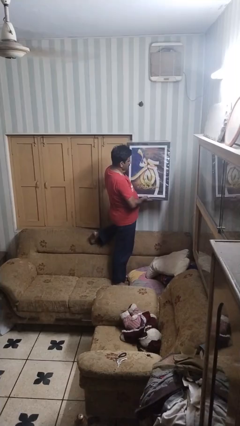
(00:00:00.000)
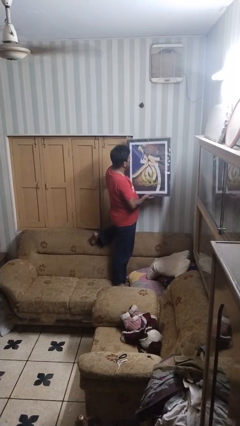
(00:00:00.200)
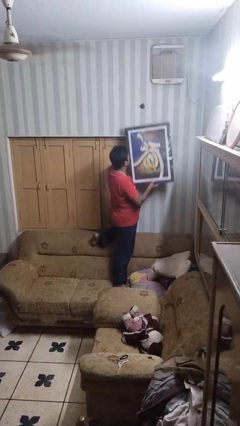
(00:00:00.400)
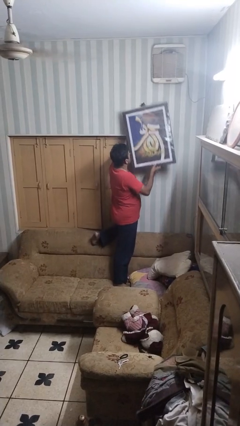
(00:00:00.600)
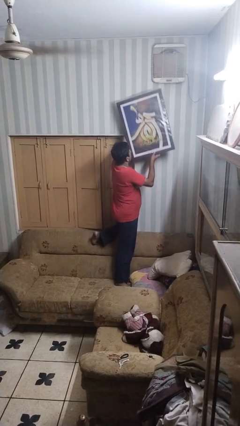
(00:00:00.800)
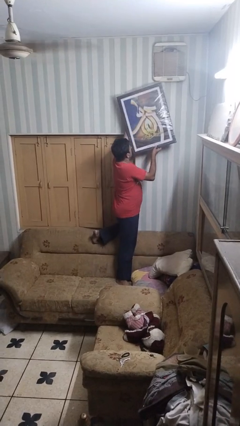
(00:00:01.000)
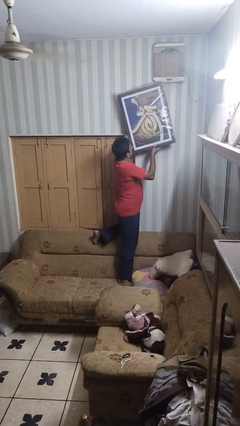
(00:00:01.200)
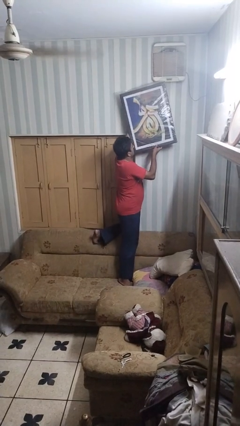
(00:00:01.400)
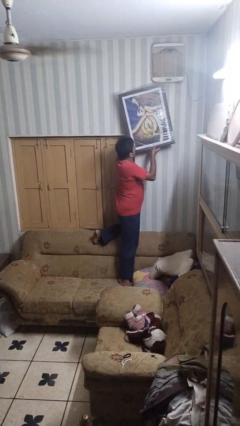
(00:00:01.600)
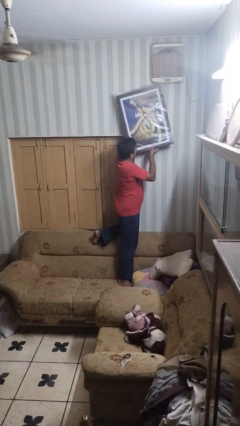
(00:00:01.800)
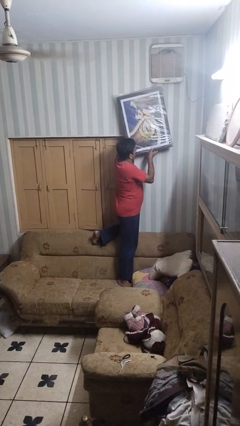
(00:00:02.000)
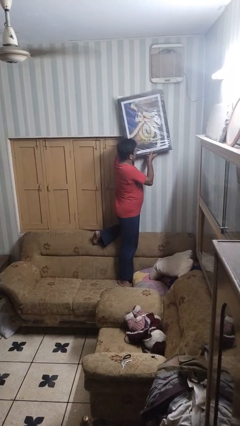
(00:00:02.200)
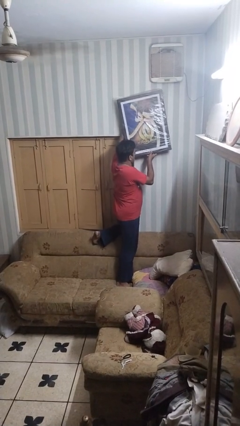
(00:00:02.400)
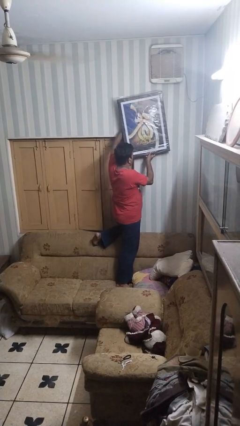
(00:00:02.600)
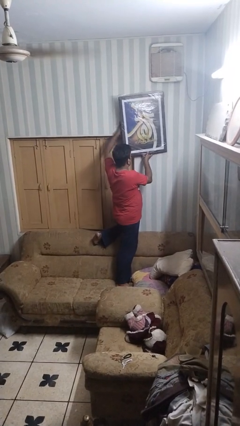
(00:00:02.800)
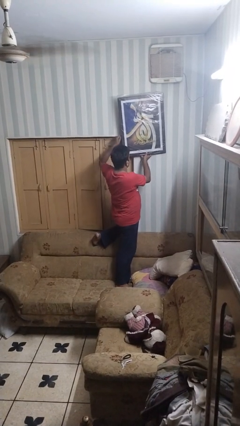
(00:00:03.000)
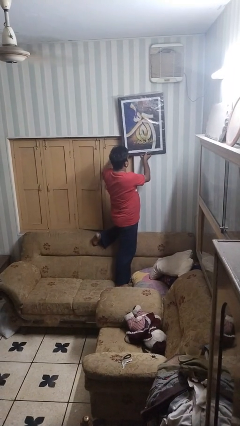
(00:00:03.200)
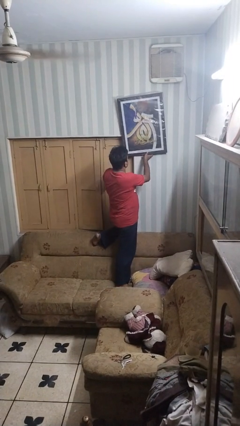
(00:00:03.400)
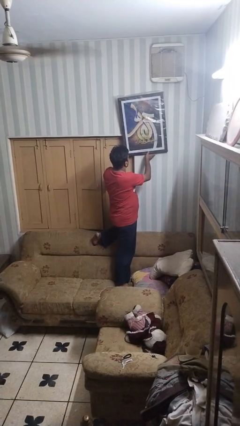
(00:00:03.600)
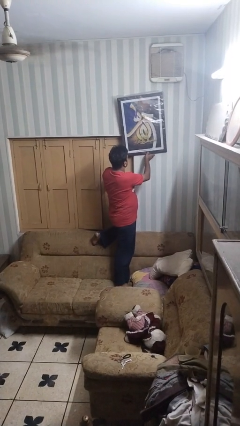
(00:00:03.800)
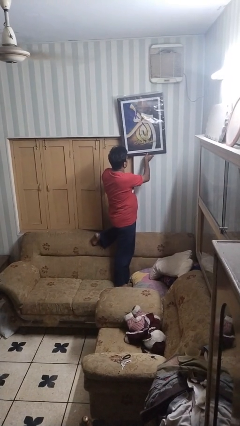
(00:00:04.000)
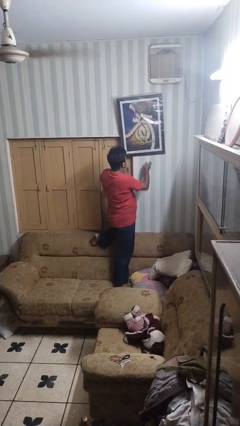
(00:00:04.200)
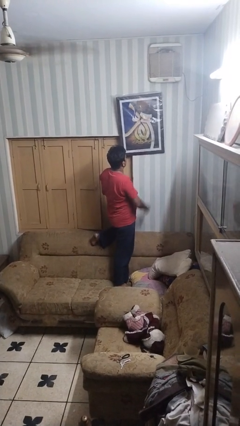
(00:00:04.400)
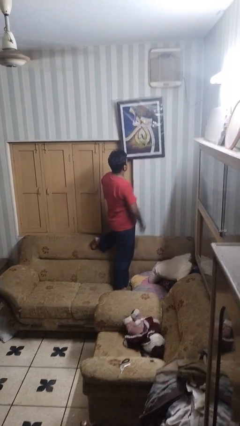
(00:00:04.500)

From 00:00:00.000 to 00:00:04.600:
person puts up picture frame

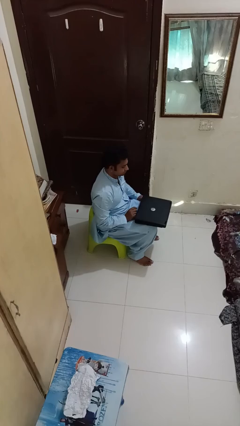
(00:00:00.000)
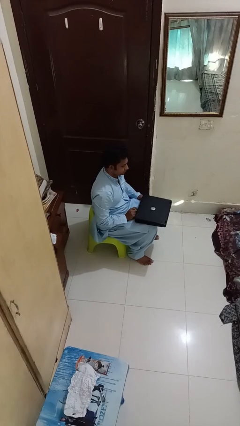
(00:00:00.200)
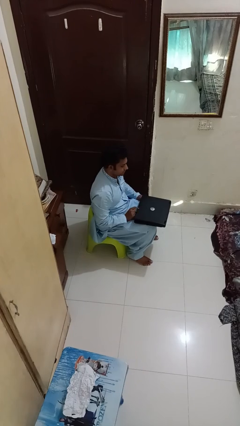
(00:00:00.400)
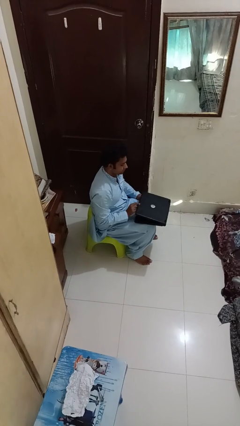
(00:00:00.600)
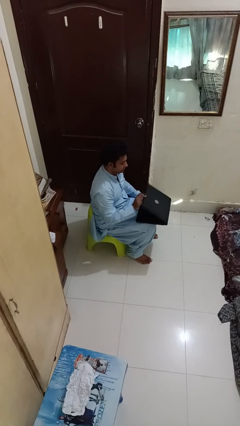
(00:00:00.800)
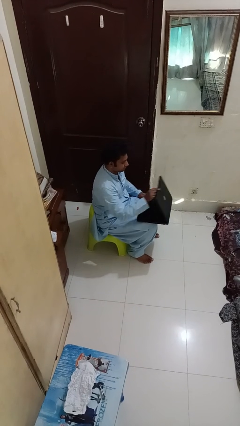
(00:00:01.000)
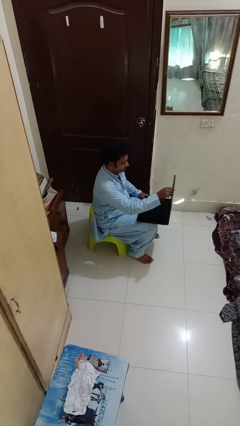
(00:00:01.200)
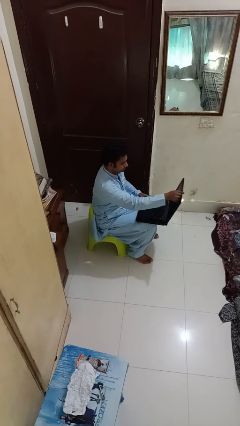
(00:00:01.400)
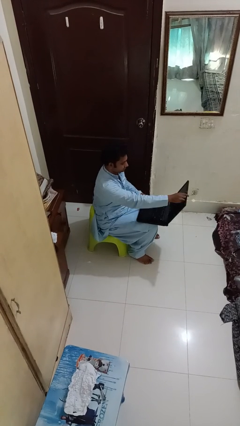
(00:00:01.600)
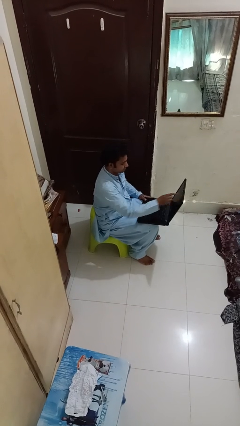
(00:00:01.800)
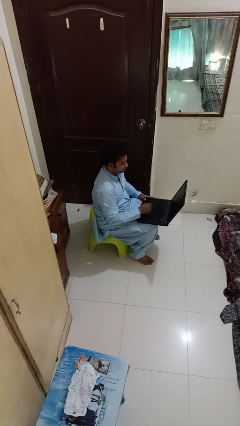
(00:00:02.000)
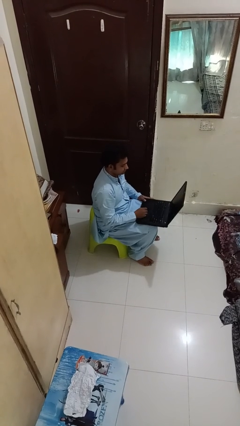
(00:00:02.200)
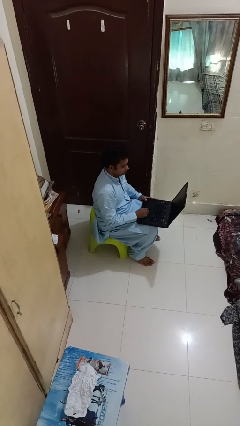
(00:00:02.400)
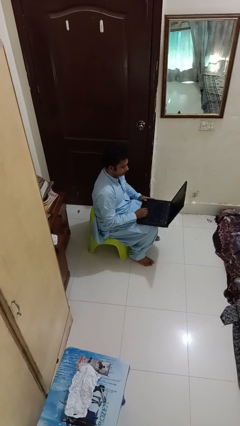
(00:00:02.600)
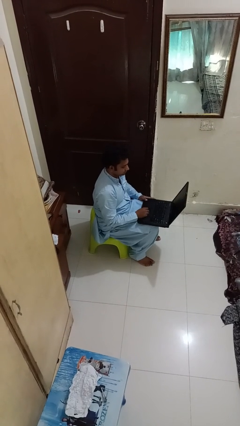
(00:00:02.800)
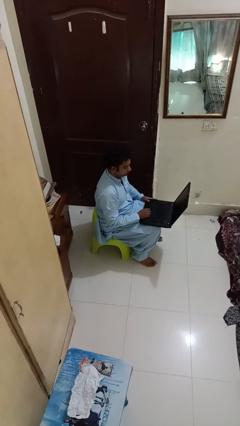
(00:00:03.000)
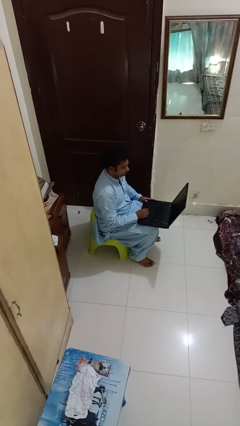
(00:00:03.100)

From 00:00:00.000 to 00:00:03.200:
person opens laptop

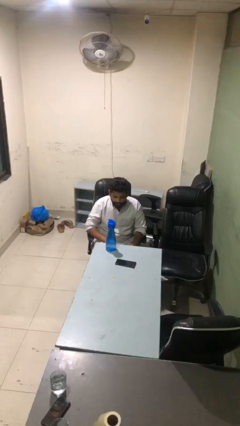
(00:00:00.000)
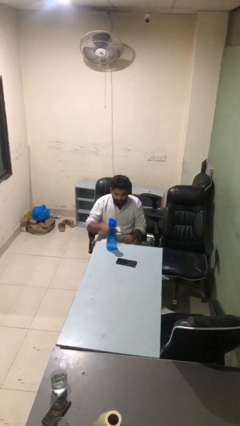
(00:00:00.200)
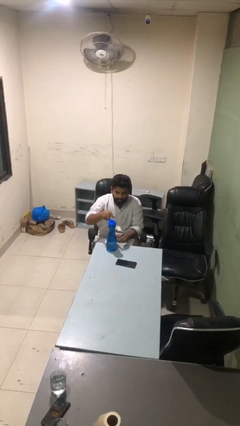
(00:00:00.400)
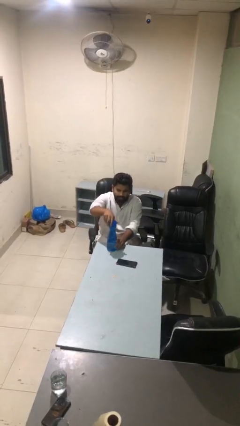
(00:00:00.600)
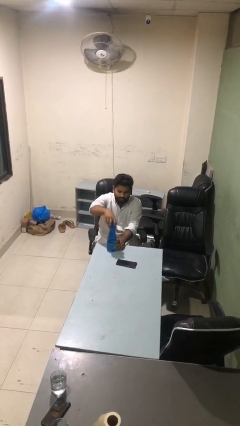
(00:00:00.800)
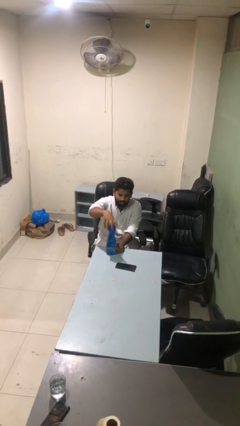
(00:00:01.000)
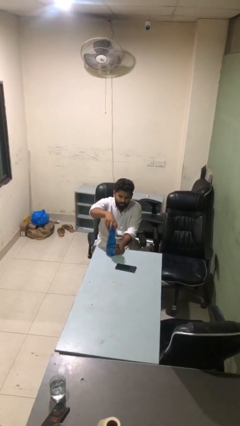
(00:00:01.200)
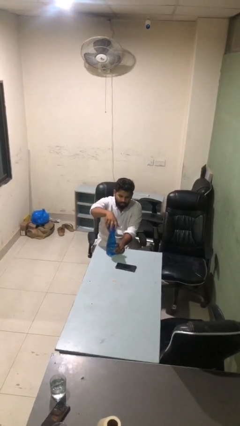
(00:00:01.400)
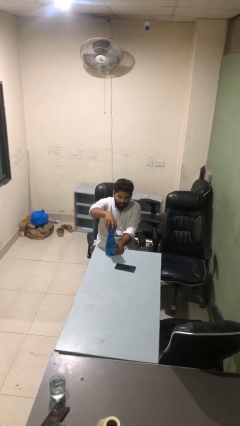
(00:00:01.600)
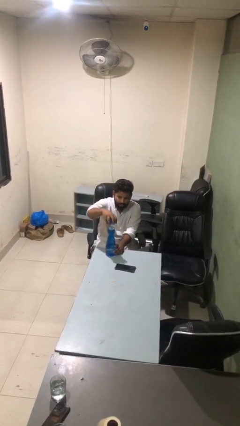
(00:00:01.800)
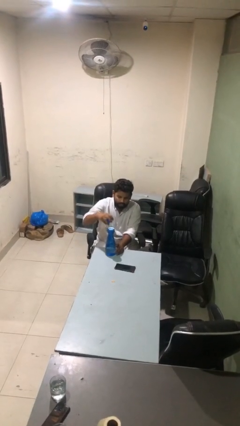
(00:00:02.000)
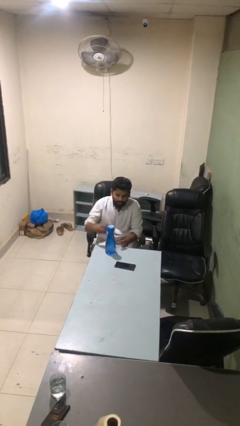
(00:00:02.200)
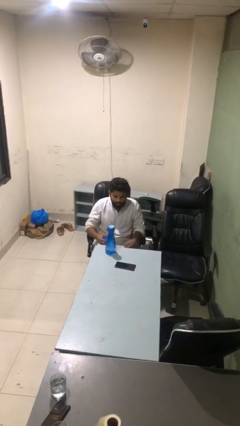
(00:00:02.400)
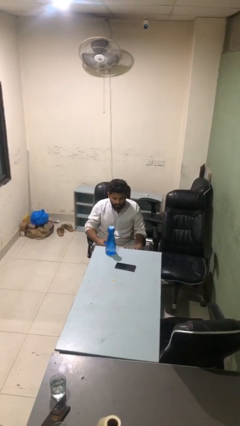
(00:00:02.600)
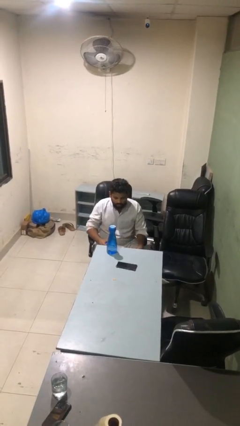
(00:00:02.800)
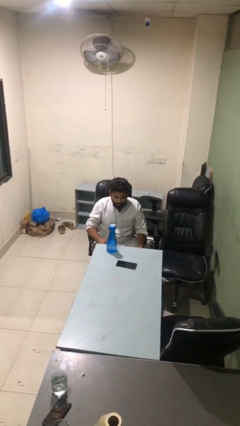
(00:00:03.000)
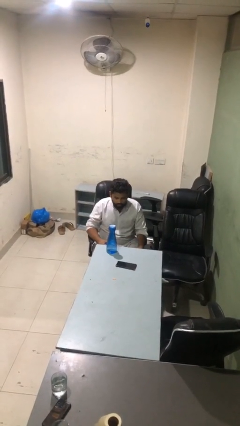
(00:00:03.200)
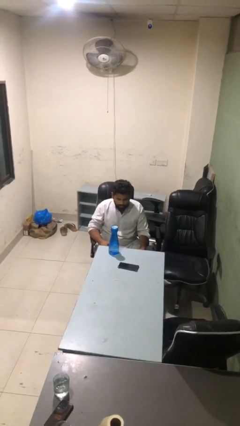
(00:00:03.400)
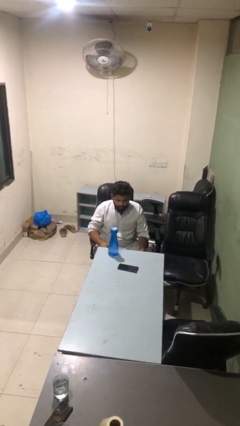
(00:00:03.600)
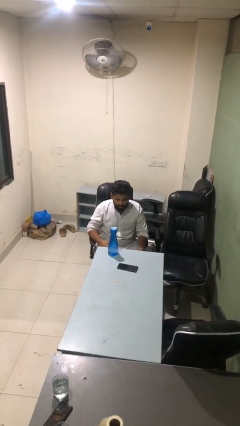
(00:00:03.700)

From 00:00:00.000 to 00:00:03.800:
person unscrews lid from bottle

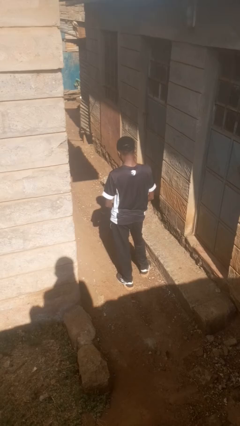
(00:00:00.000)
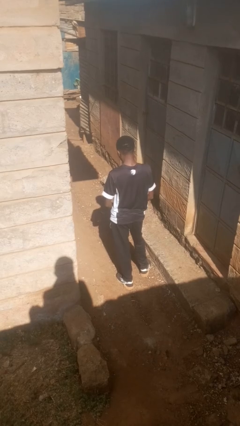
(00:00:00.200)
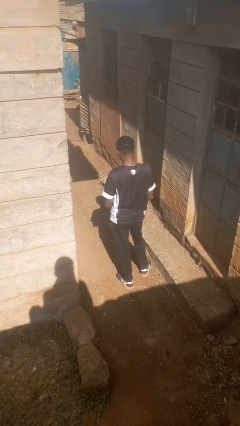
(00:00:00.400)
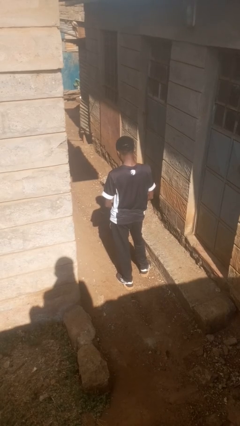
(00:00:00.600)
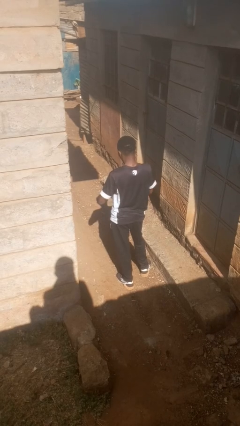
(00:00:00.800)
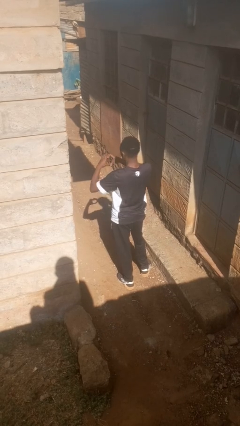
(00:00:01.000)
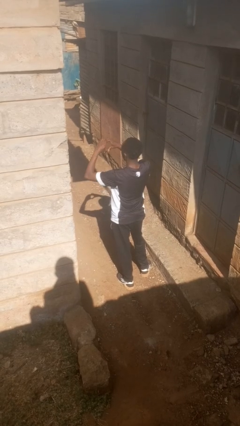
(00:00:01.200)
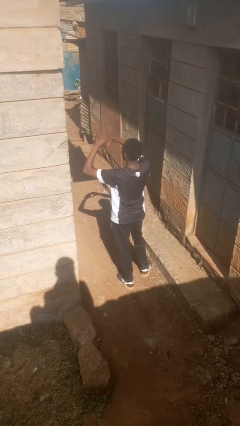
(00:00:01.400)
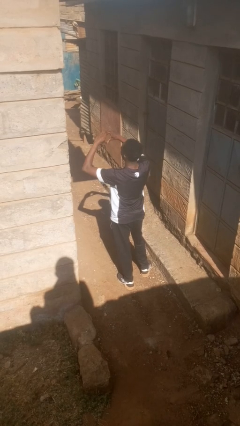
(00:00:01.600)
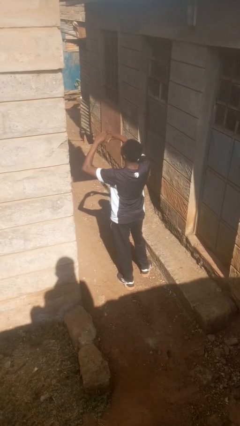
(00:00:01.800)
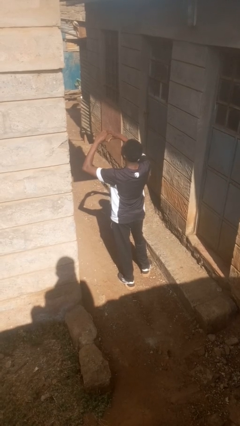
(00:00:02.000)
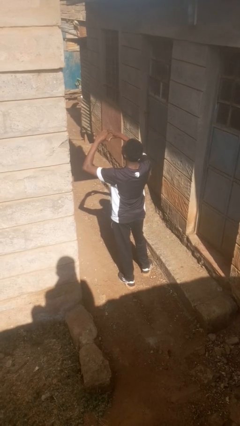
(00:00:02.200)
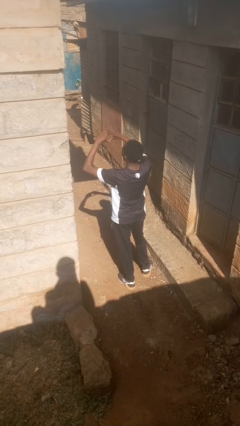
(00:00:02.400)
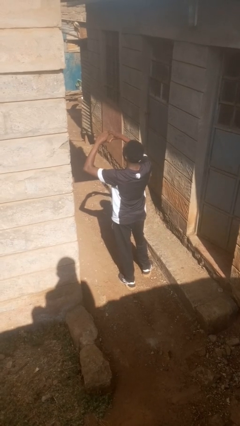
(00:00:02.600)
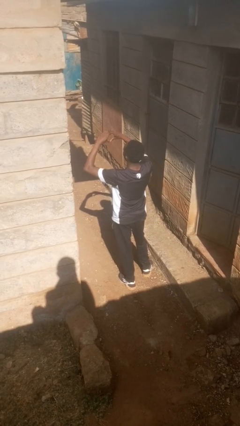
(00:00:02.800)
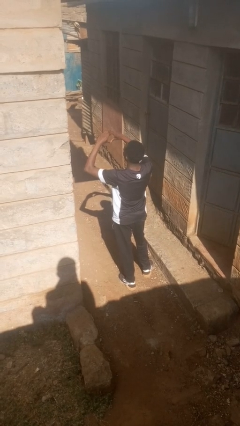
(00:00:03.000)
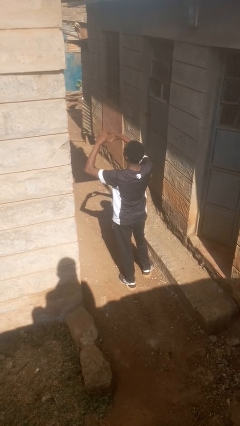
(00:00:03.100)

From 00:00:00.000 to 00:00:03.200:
person gestures heart

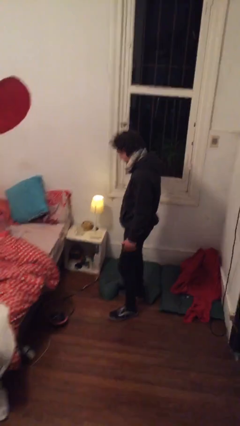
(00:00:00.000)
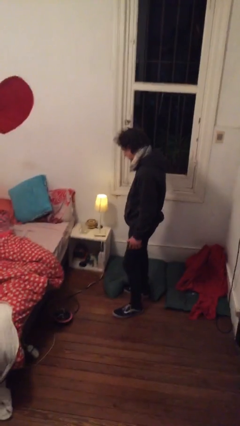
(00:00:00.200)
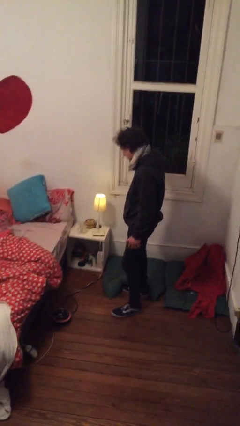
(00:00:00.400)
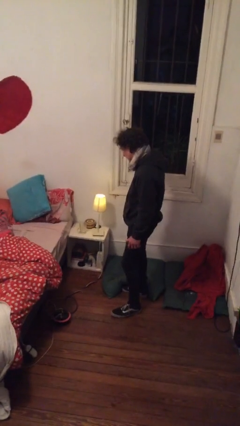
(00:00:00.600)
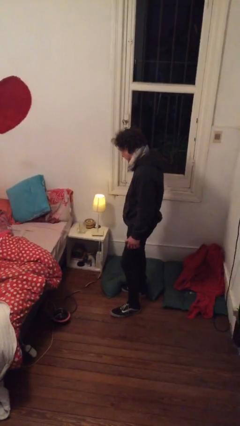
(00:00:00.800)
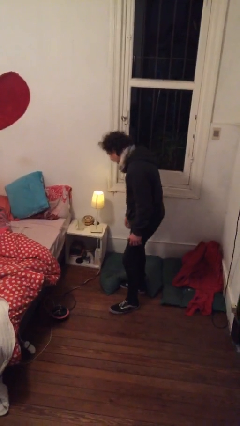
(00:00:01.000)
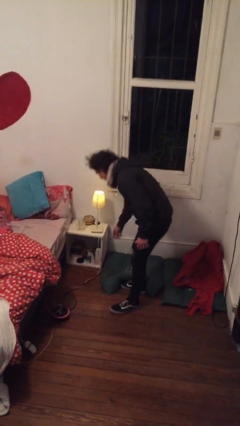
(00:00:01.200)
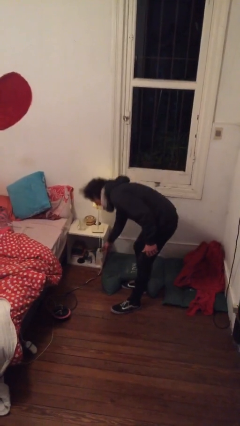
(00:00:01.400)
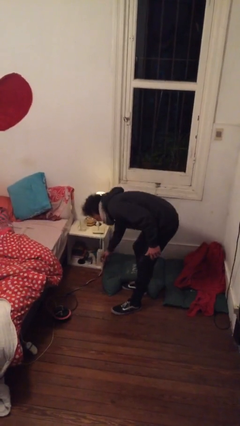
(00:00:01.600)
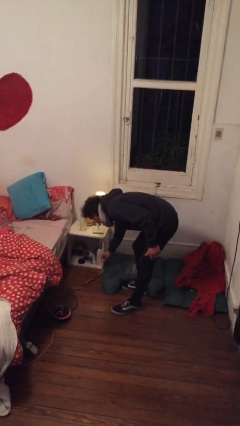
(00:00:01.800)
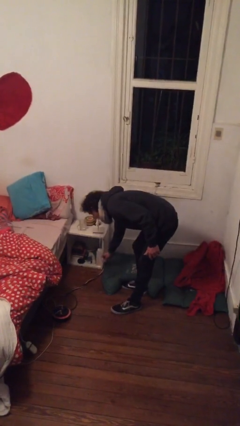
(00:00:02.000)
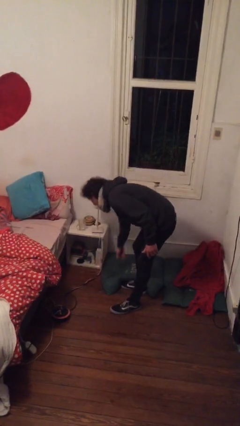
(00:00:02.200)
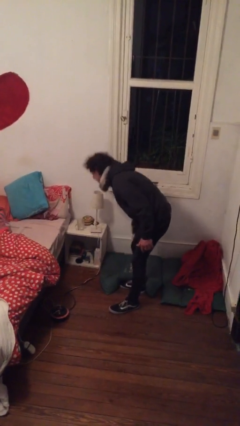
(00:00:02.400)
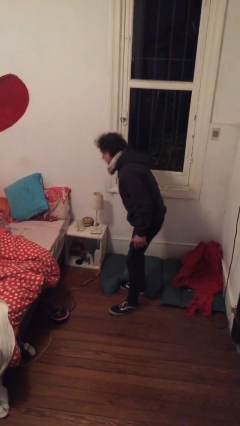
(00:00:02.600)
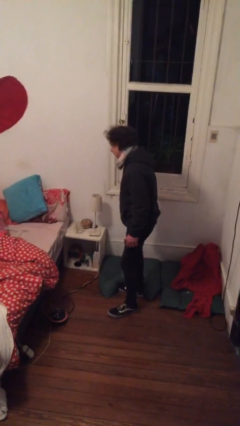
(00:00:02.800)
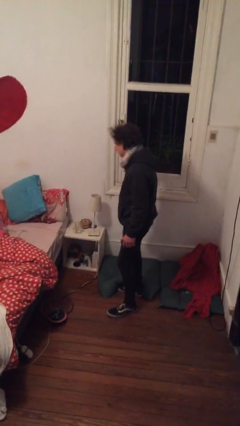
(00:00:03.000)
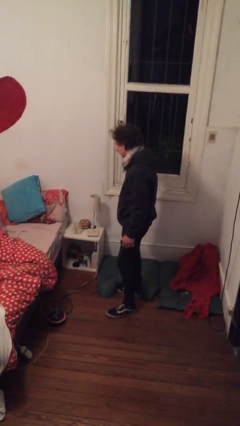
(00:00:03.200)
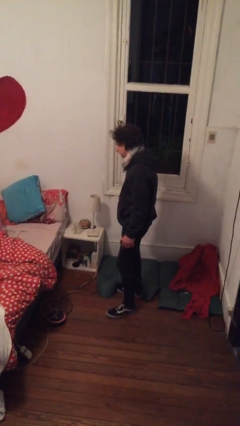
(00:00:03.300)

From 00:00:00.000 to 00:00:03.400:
person turns off lamp
